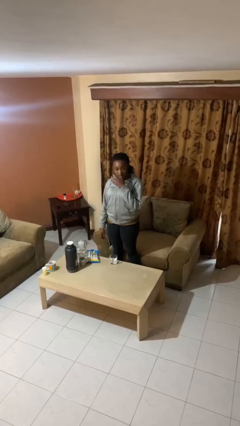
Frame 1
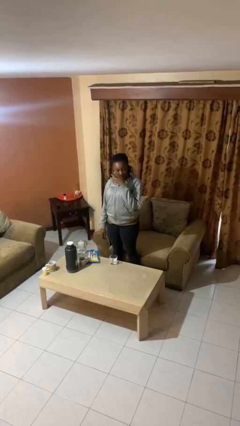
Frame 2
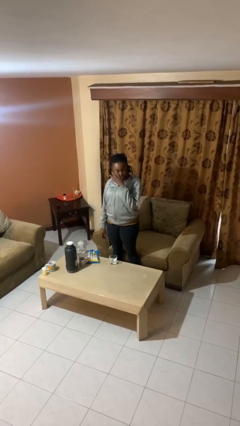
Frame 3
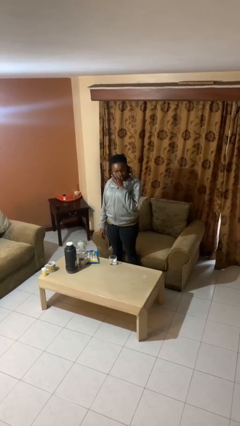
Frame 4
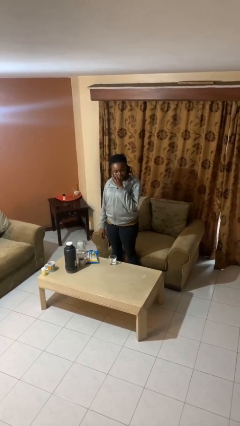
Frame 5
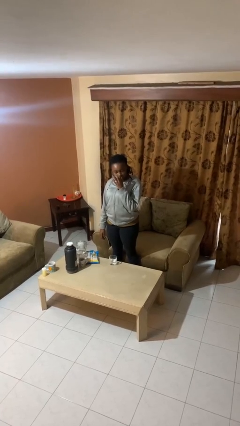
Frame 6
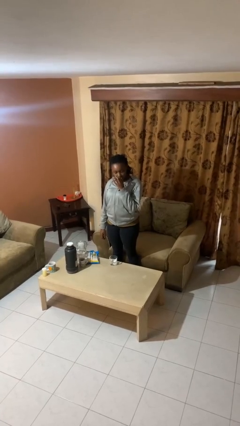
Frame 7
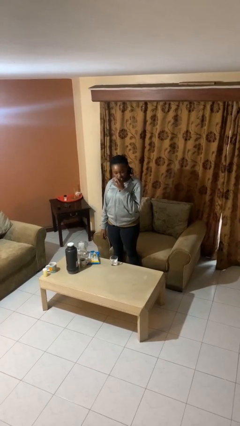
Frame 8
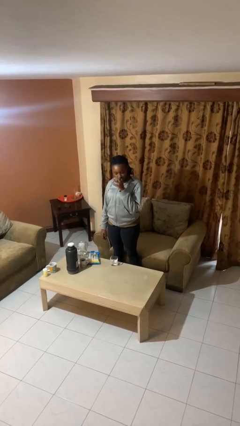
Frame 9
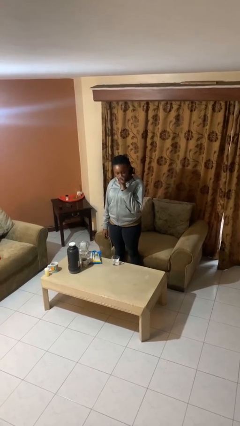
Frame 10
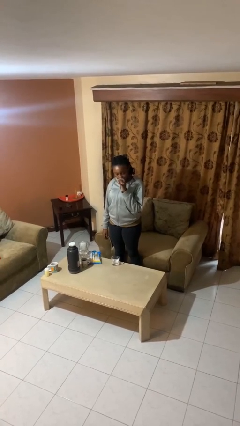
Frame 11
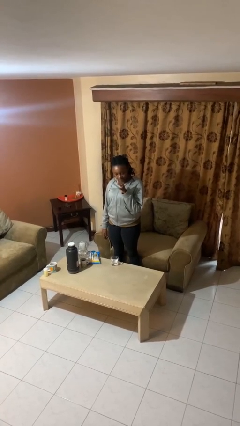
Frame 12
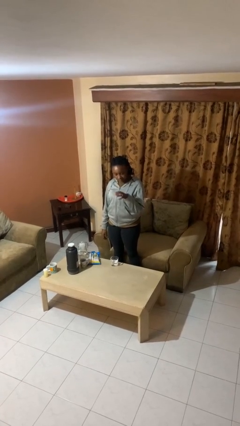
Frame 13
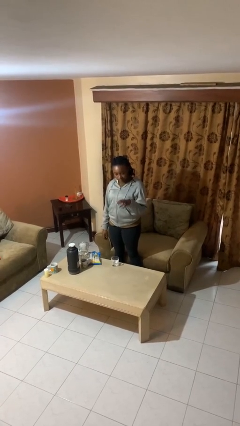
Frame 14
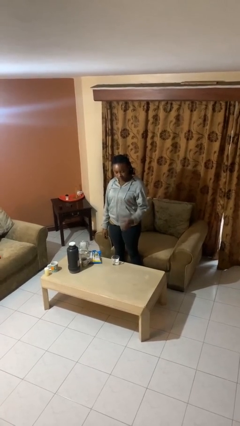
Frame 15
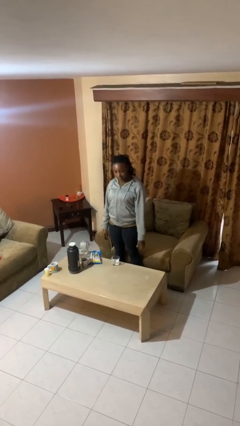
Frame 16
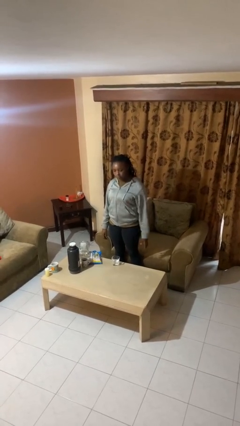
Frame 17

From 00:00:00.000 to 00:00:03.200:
person licks fingers

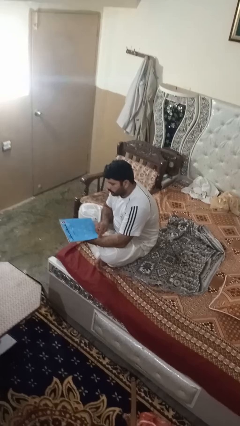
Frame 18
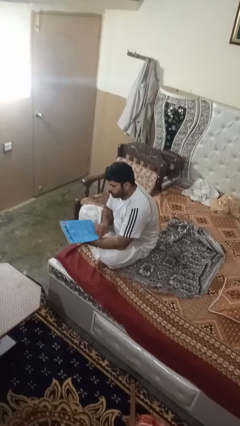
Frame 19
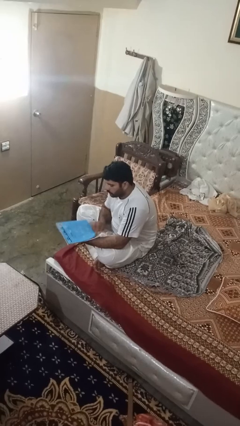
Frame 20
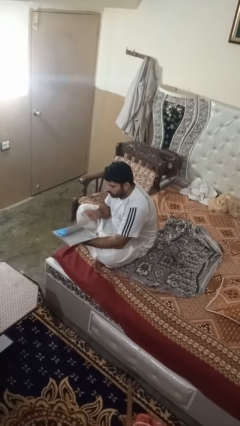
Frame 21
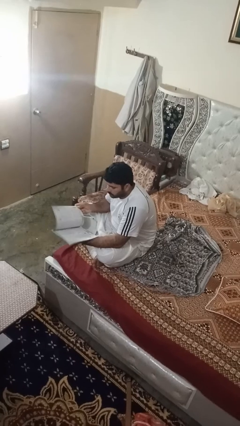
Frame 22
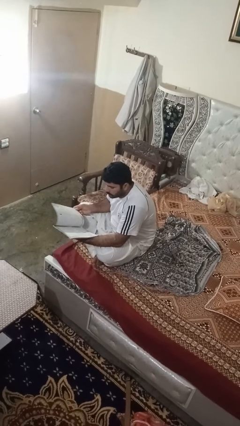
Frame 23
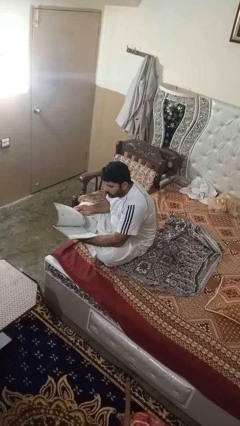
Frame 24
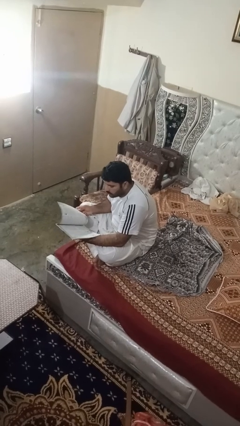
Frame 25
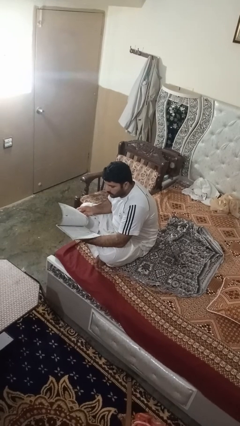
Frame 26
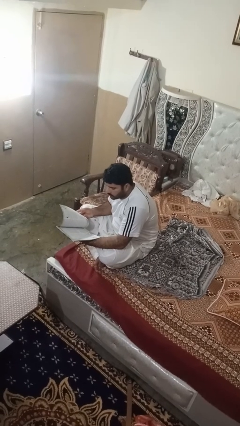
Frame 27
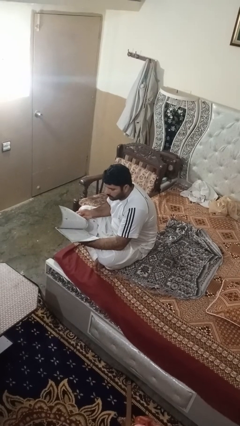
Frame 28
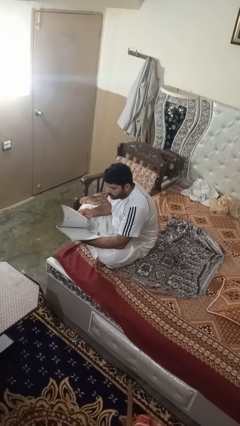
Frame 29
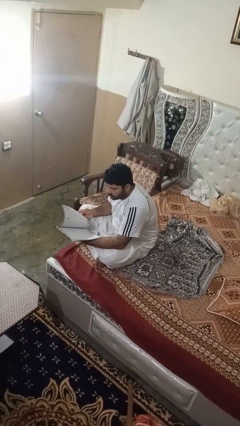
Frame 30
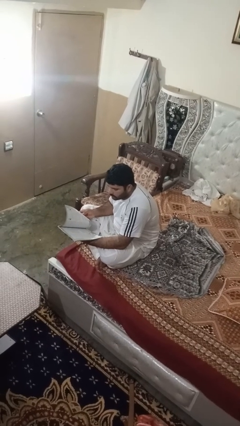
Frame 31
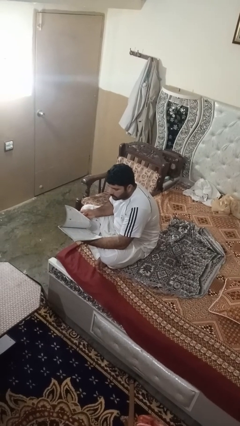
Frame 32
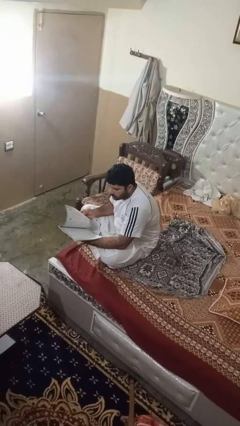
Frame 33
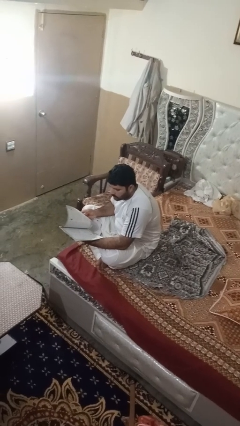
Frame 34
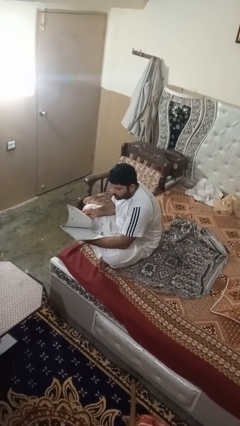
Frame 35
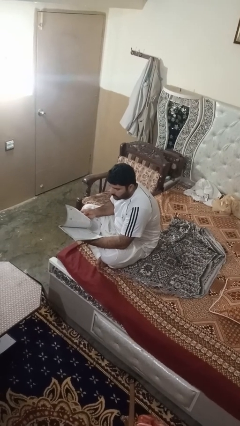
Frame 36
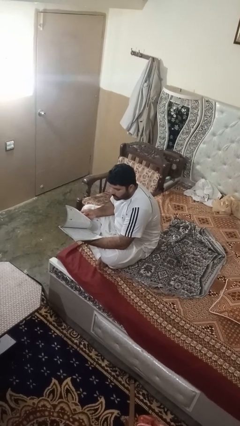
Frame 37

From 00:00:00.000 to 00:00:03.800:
person reads magazine

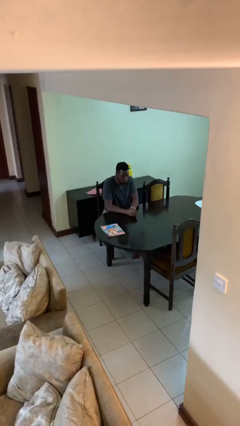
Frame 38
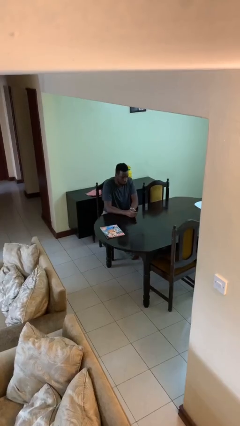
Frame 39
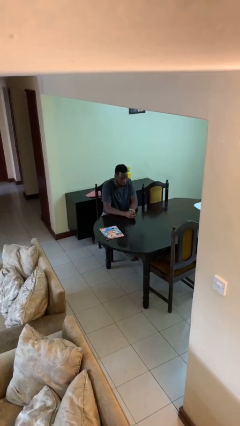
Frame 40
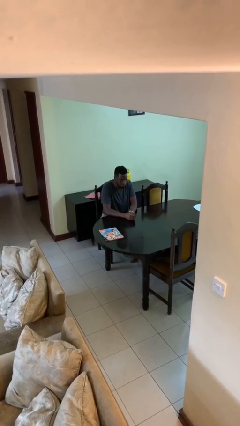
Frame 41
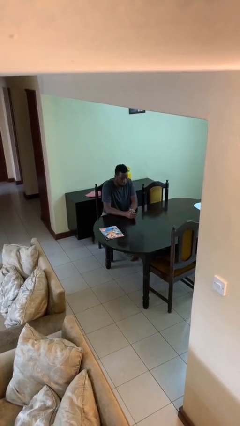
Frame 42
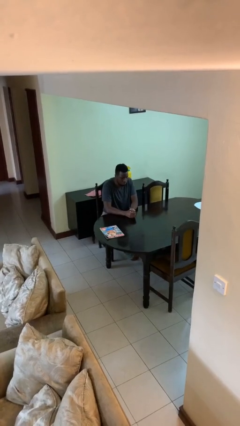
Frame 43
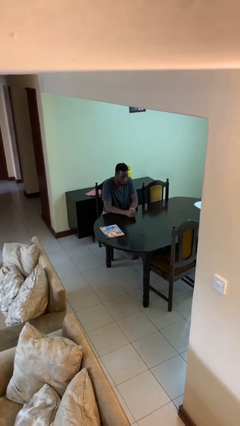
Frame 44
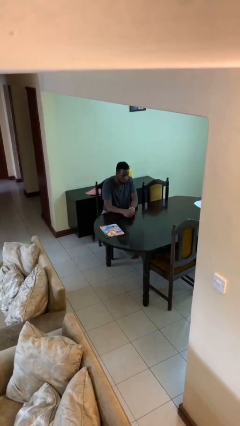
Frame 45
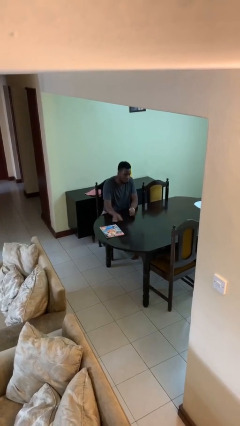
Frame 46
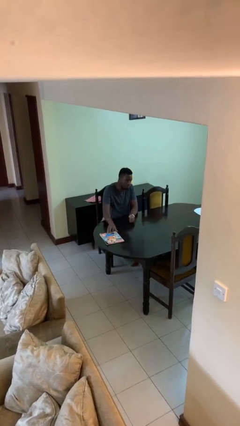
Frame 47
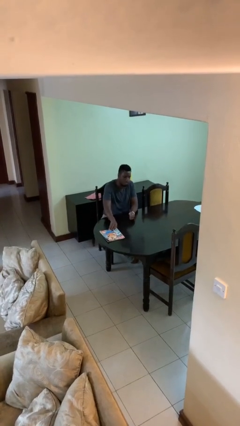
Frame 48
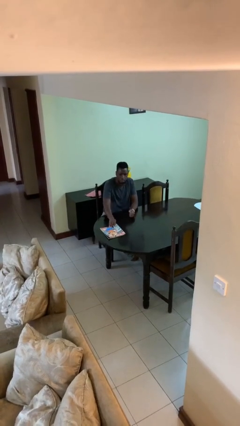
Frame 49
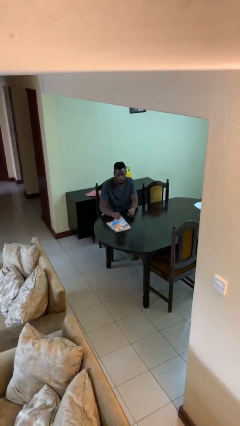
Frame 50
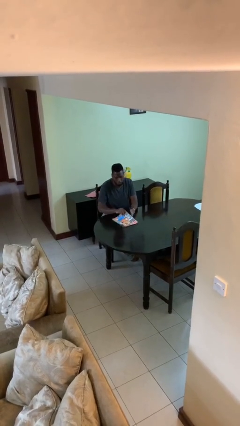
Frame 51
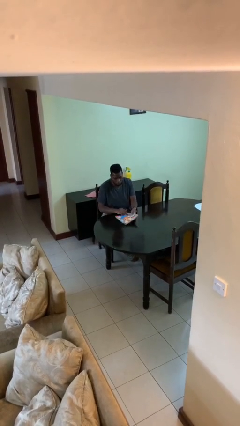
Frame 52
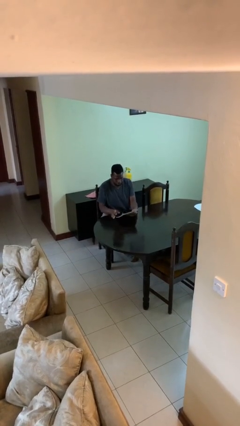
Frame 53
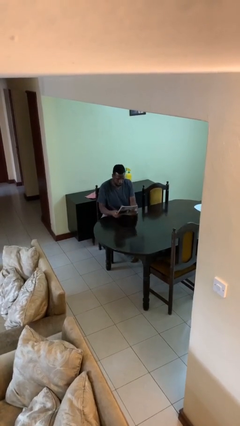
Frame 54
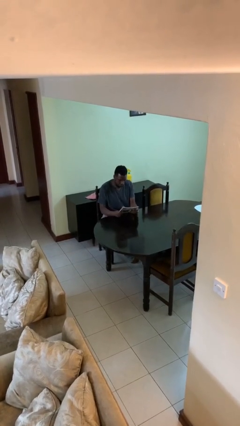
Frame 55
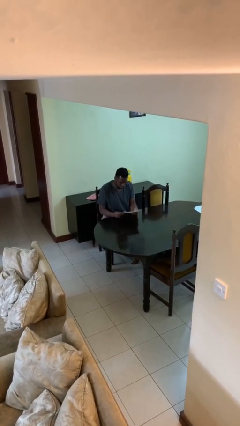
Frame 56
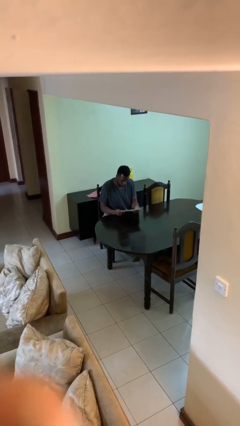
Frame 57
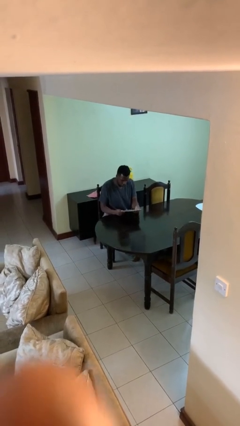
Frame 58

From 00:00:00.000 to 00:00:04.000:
person picks up object from table

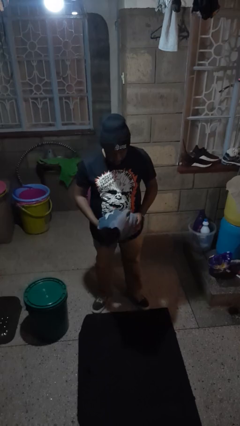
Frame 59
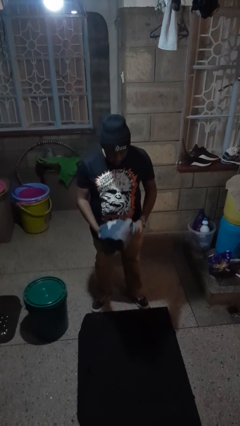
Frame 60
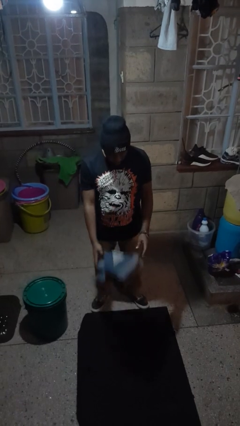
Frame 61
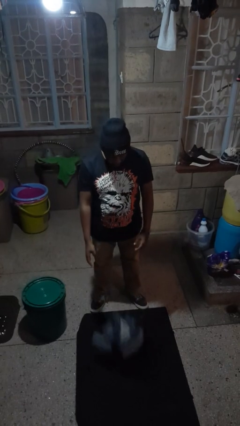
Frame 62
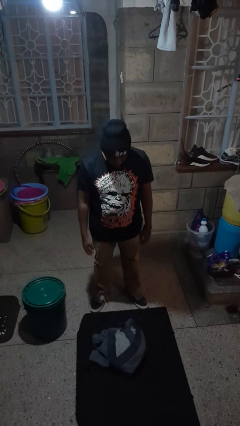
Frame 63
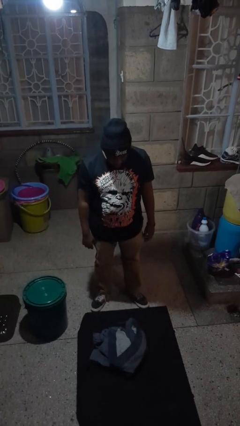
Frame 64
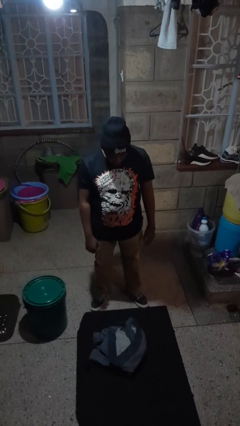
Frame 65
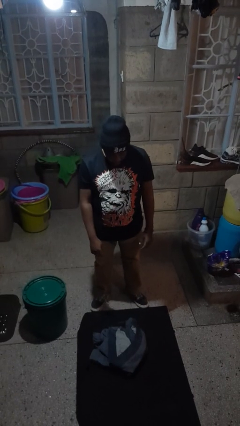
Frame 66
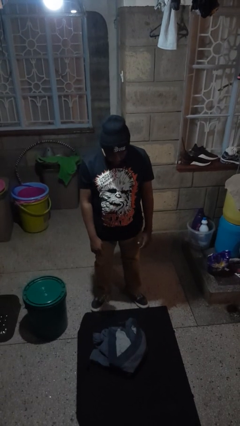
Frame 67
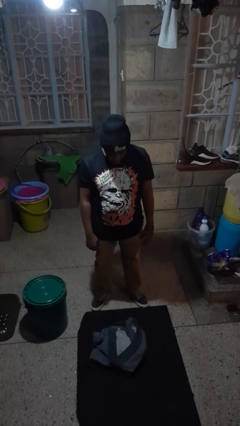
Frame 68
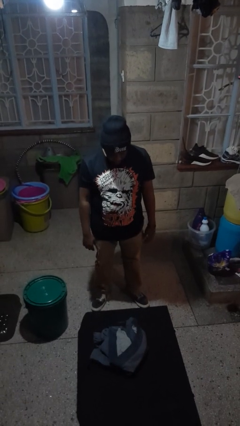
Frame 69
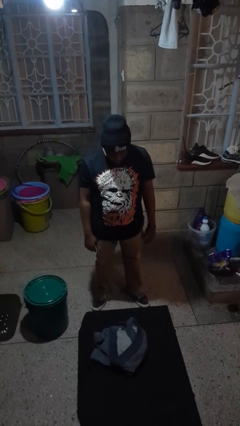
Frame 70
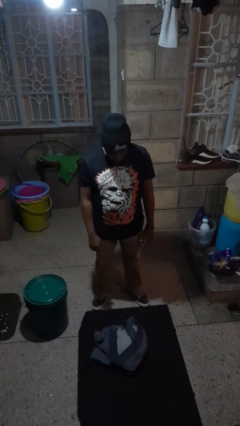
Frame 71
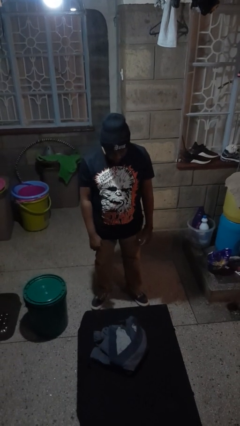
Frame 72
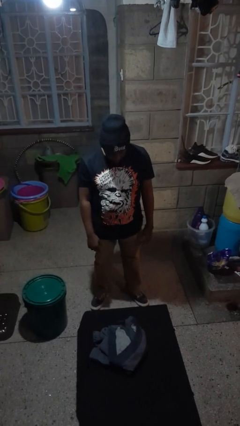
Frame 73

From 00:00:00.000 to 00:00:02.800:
person drops object

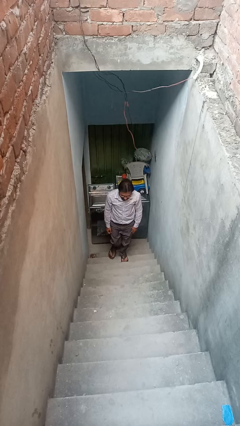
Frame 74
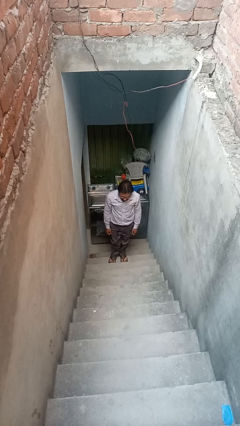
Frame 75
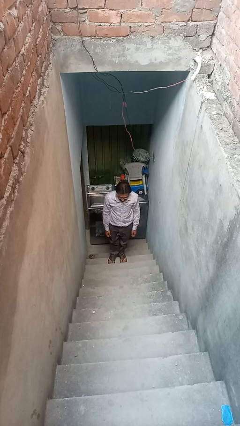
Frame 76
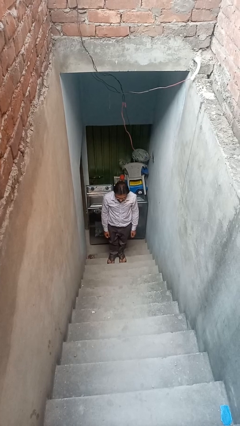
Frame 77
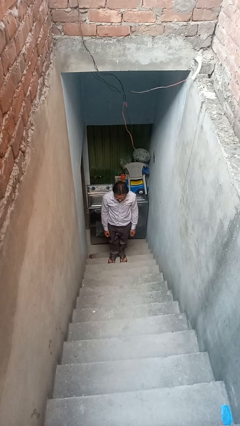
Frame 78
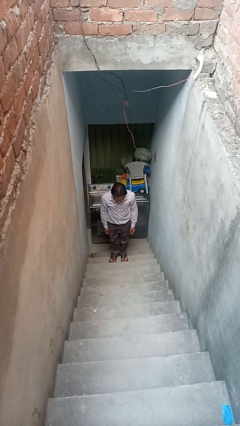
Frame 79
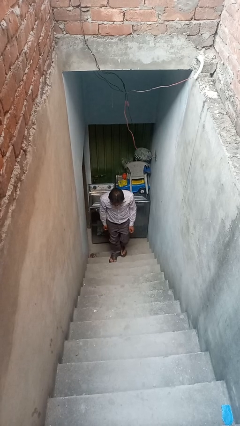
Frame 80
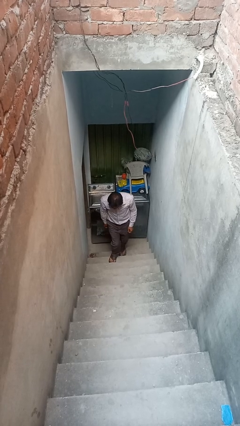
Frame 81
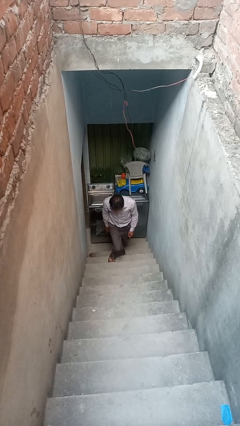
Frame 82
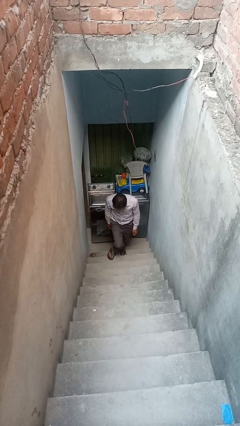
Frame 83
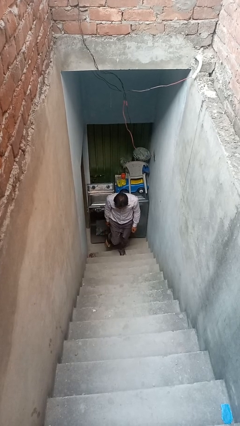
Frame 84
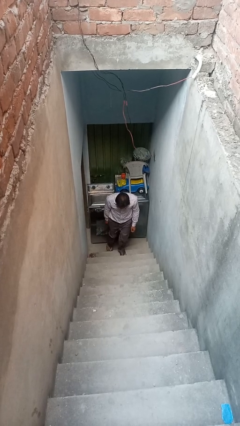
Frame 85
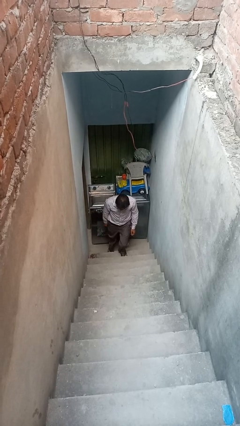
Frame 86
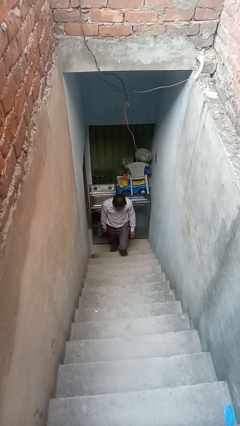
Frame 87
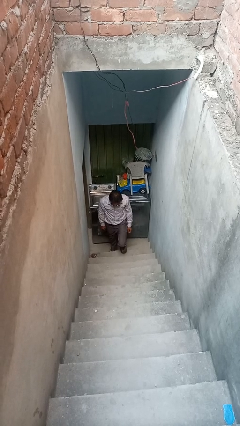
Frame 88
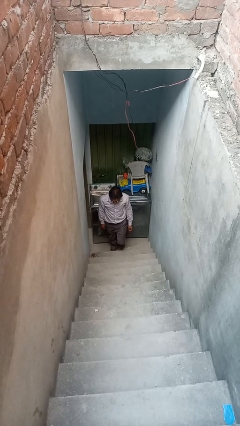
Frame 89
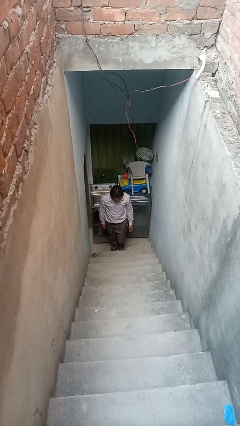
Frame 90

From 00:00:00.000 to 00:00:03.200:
person climbs down stairs

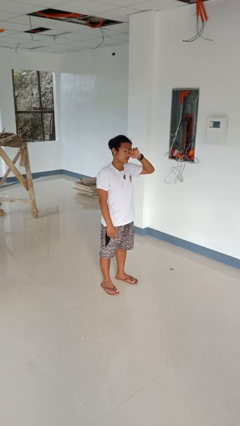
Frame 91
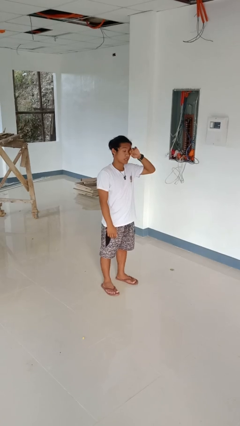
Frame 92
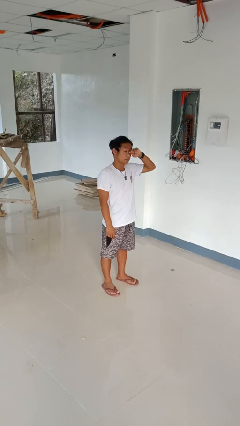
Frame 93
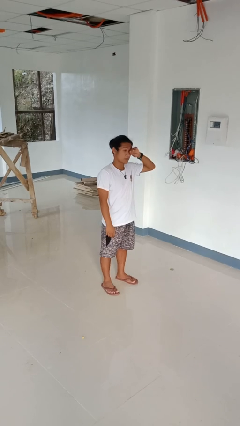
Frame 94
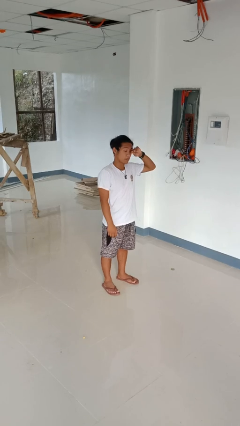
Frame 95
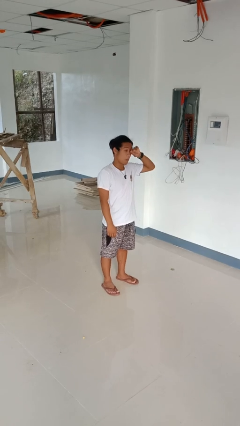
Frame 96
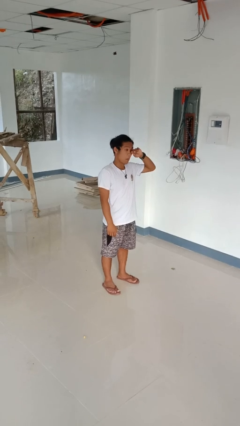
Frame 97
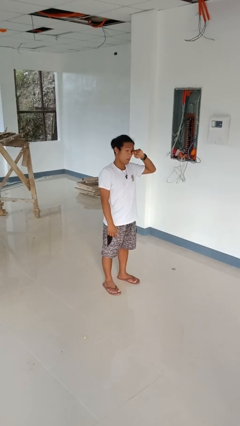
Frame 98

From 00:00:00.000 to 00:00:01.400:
person rubs eyes
